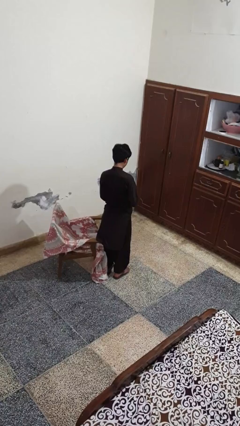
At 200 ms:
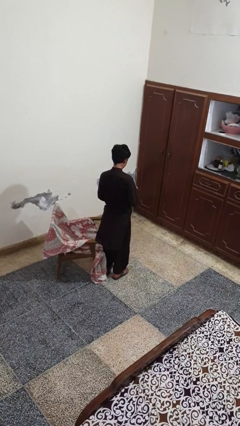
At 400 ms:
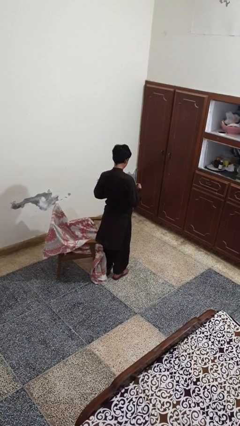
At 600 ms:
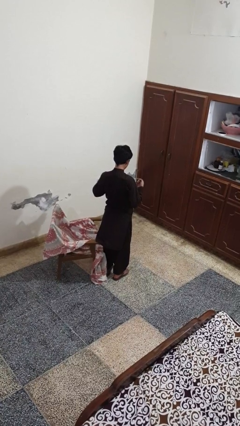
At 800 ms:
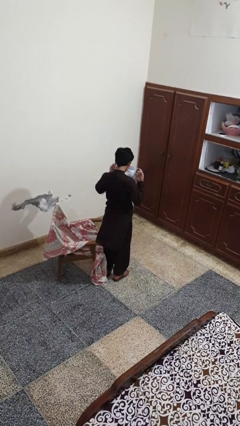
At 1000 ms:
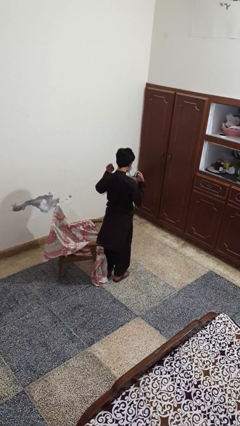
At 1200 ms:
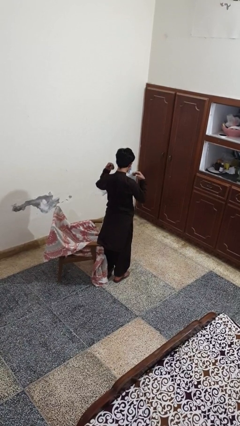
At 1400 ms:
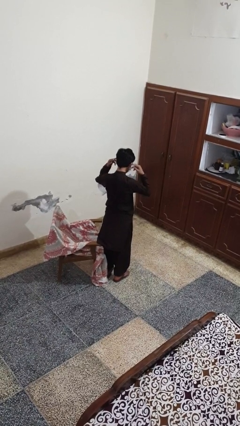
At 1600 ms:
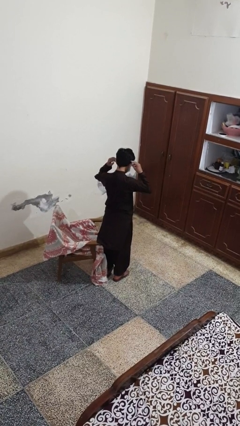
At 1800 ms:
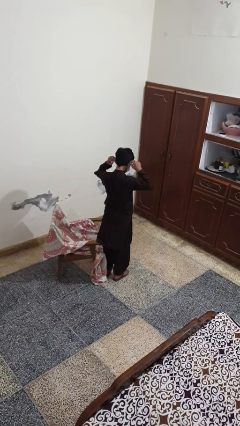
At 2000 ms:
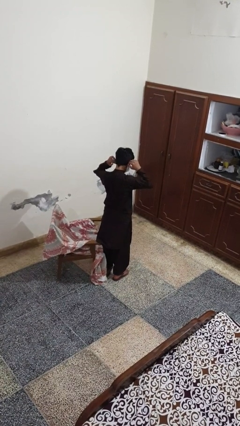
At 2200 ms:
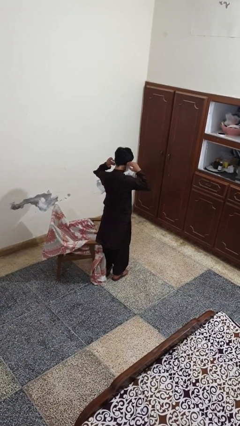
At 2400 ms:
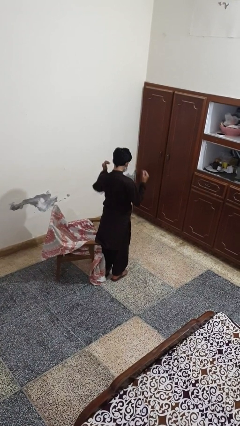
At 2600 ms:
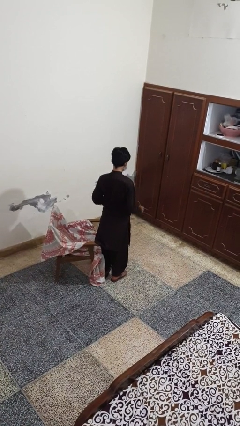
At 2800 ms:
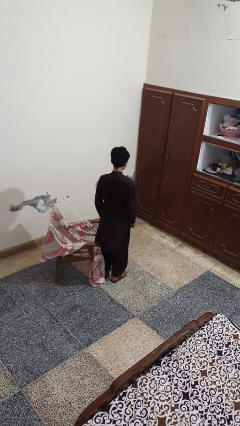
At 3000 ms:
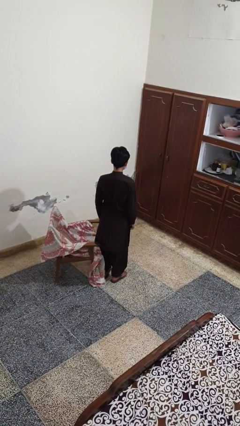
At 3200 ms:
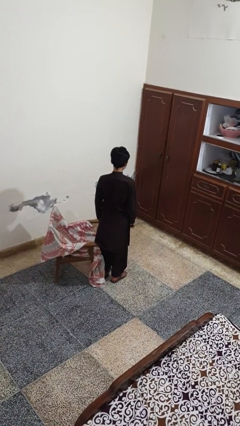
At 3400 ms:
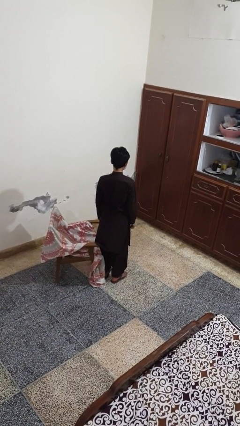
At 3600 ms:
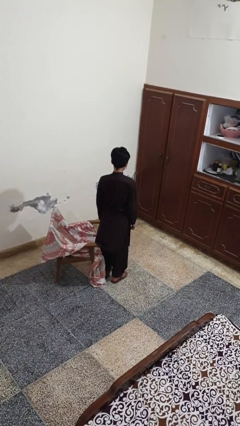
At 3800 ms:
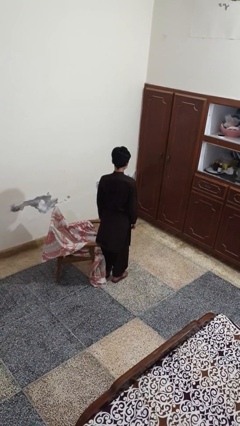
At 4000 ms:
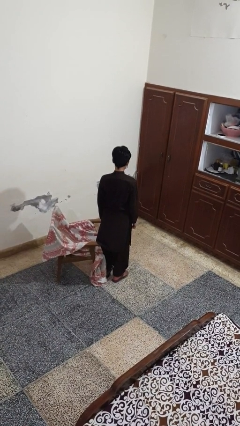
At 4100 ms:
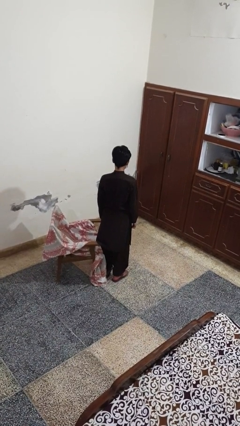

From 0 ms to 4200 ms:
person puts on facemask

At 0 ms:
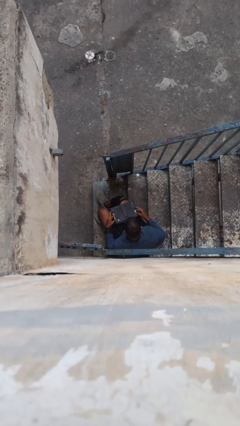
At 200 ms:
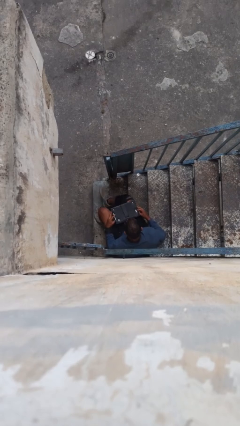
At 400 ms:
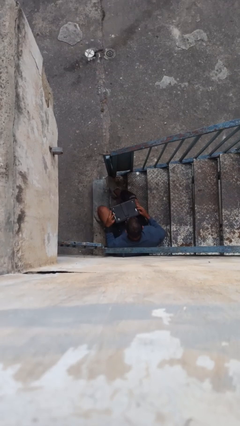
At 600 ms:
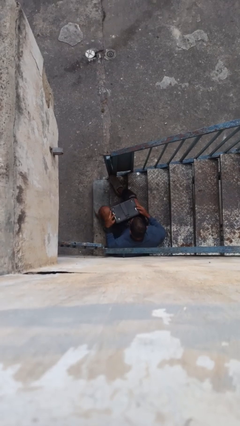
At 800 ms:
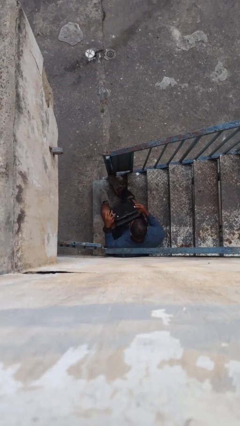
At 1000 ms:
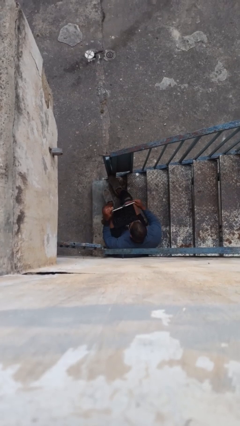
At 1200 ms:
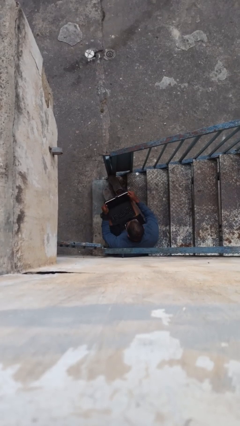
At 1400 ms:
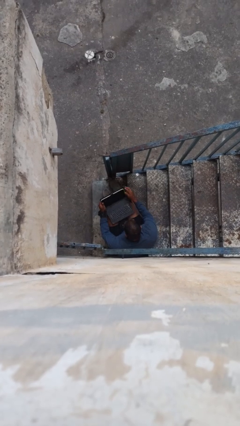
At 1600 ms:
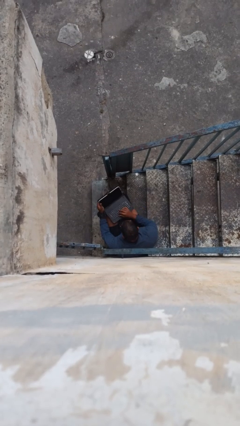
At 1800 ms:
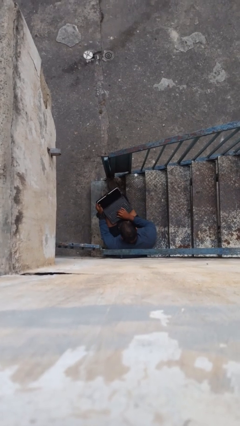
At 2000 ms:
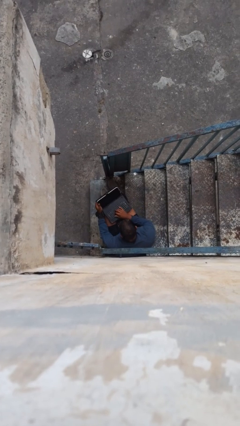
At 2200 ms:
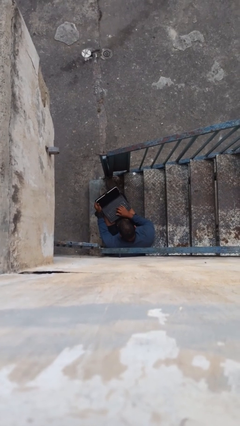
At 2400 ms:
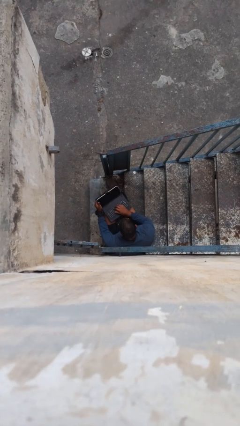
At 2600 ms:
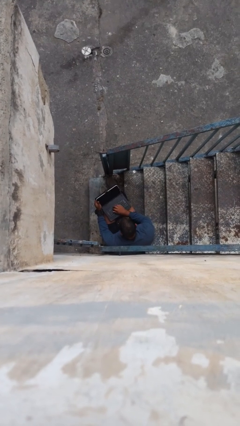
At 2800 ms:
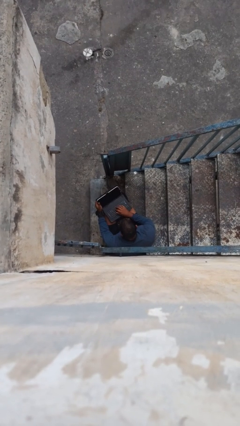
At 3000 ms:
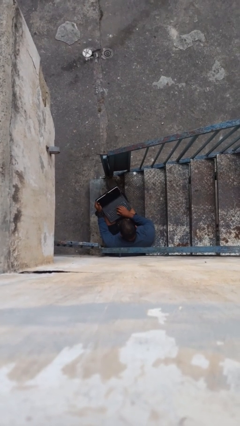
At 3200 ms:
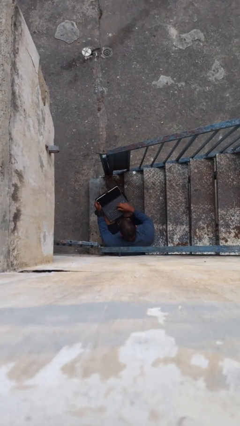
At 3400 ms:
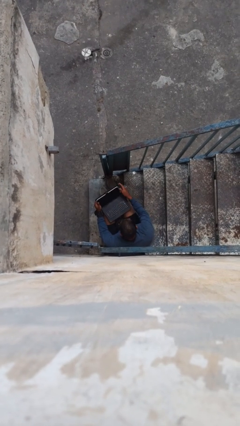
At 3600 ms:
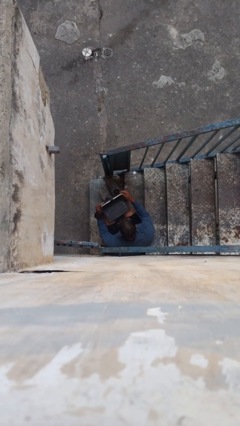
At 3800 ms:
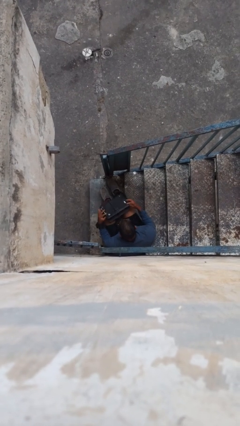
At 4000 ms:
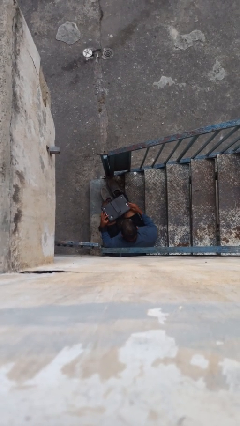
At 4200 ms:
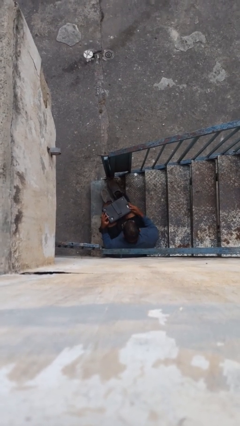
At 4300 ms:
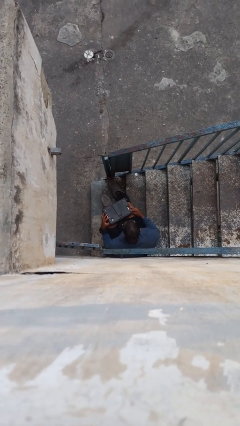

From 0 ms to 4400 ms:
person interacts with laptop

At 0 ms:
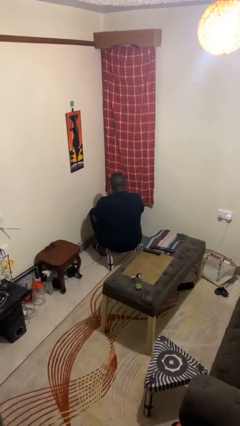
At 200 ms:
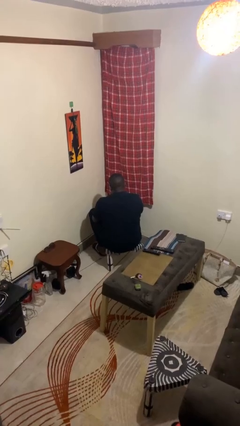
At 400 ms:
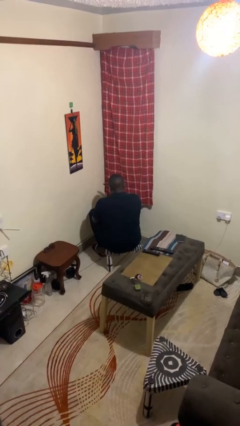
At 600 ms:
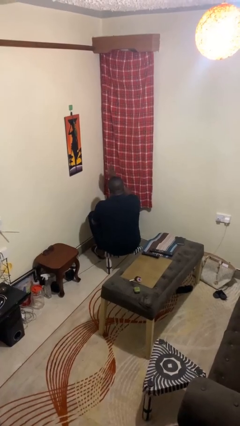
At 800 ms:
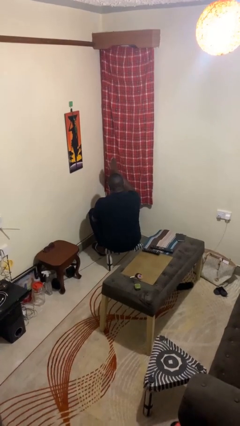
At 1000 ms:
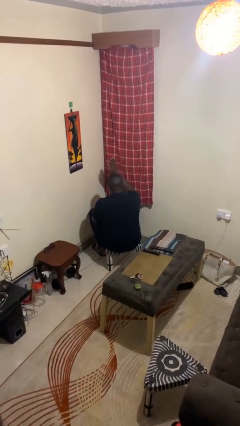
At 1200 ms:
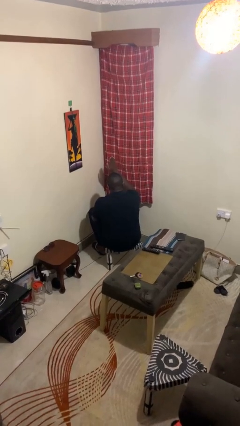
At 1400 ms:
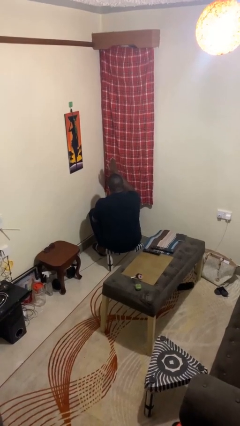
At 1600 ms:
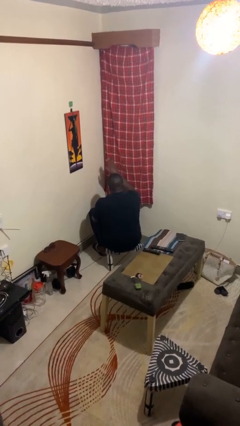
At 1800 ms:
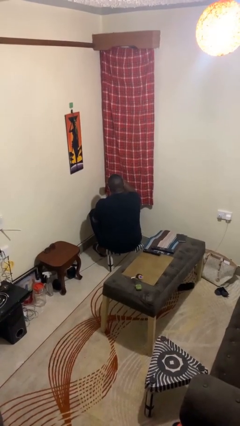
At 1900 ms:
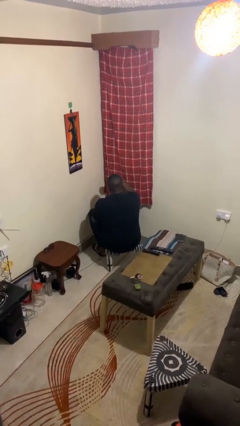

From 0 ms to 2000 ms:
person gestures swipe up

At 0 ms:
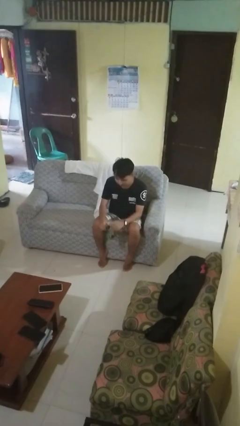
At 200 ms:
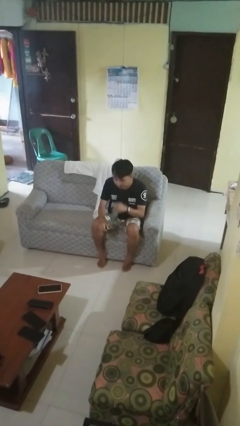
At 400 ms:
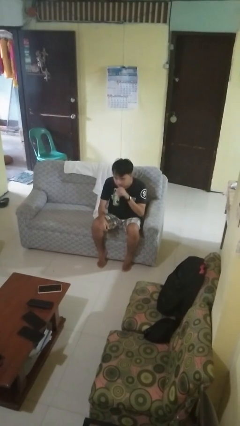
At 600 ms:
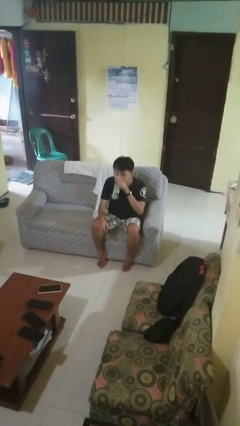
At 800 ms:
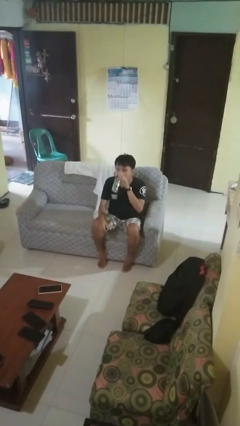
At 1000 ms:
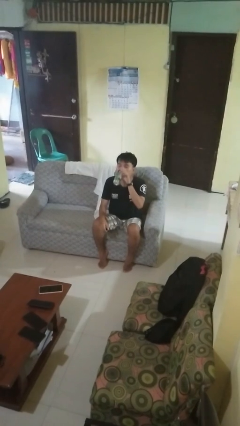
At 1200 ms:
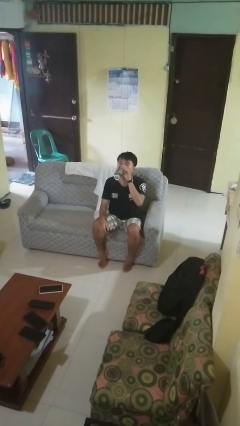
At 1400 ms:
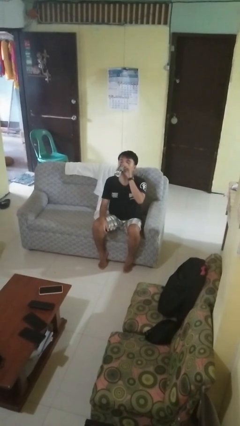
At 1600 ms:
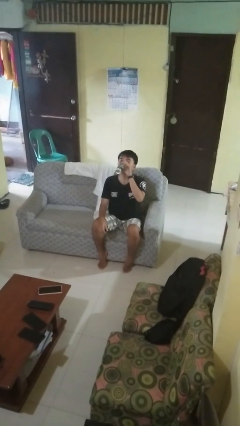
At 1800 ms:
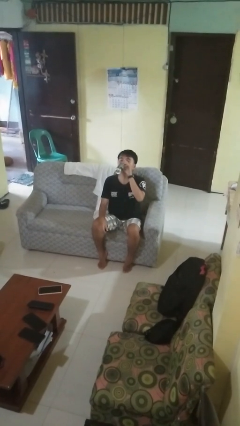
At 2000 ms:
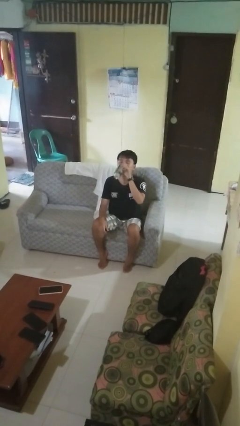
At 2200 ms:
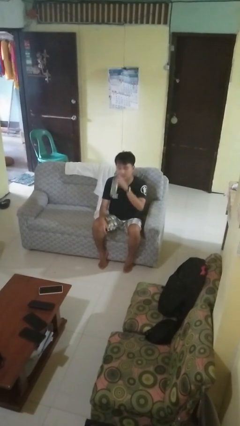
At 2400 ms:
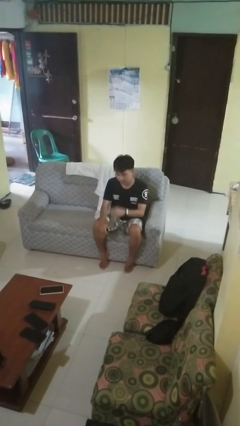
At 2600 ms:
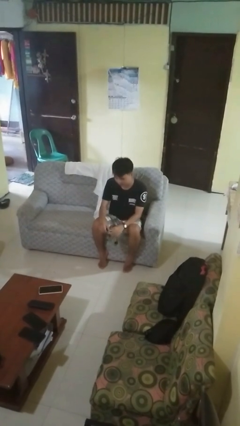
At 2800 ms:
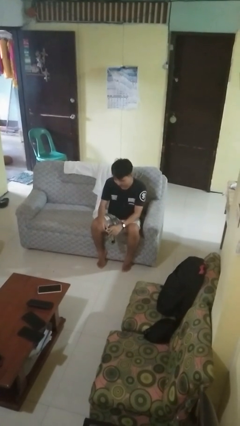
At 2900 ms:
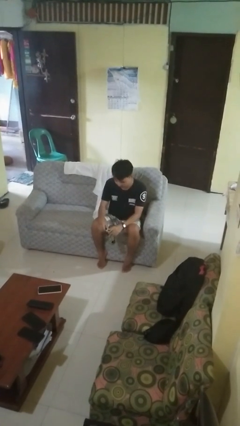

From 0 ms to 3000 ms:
person drinks from beverage can

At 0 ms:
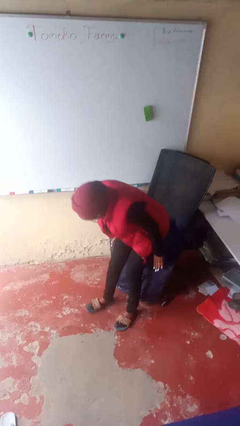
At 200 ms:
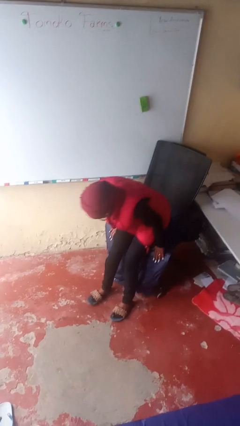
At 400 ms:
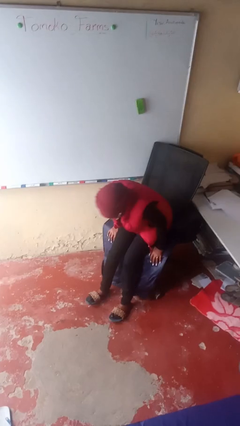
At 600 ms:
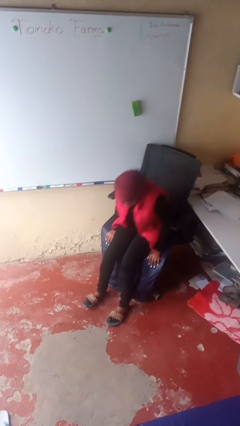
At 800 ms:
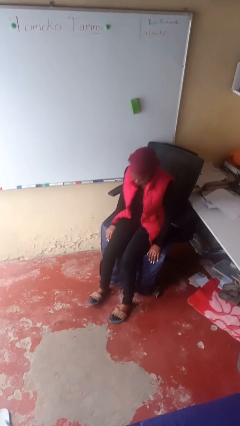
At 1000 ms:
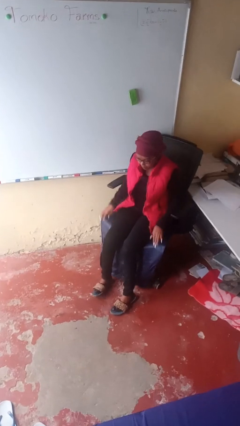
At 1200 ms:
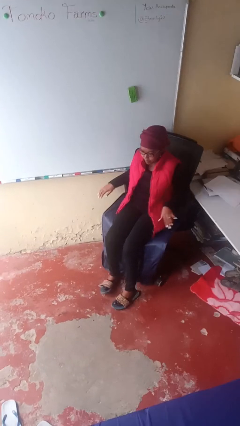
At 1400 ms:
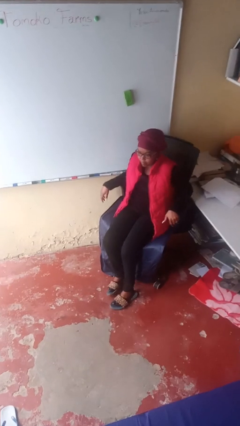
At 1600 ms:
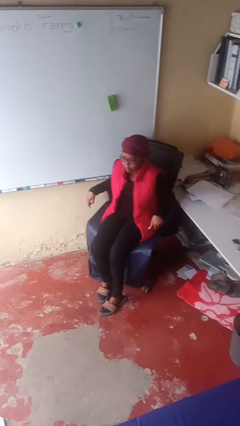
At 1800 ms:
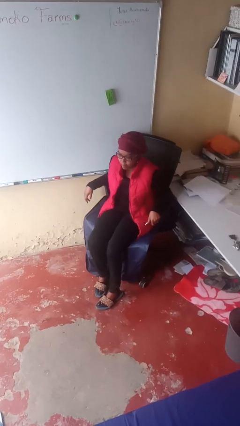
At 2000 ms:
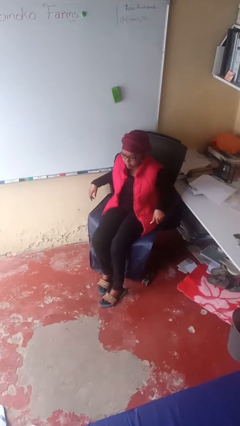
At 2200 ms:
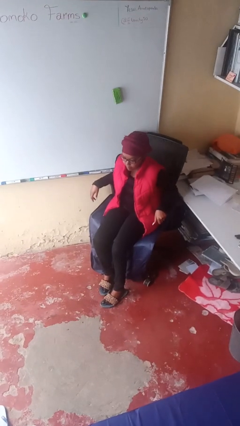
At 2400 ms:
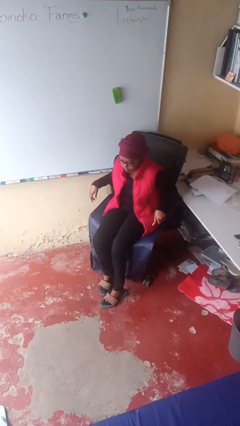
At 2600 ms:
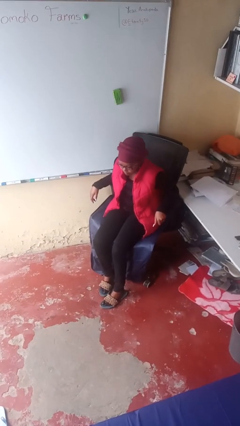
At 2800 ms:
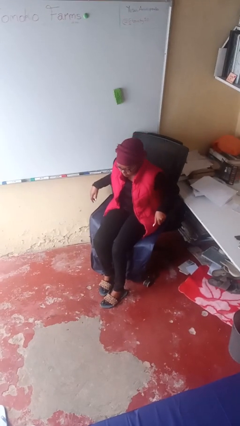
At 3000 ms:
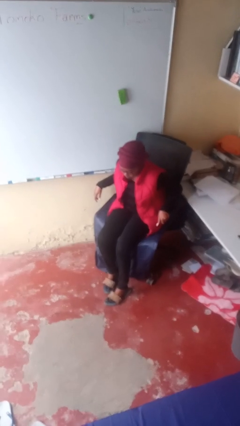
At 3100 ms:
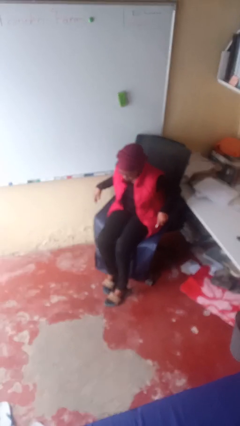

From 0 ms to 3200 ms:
person sits down

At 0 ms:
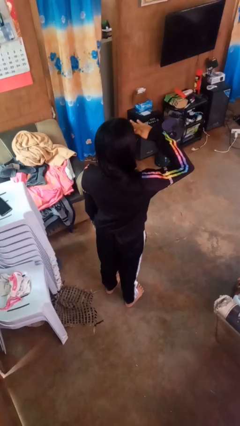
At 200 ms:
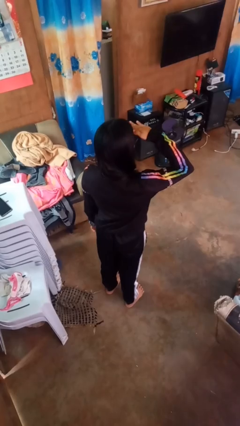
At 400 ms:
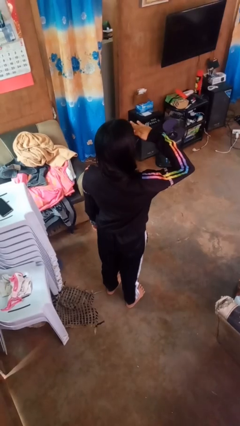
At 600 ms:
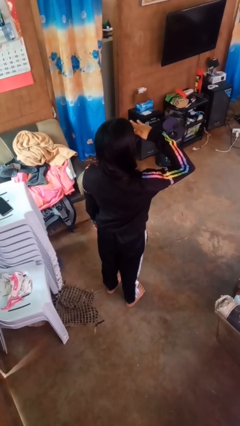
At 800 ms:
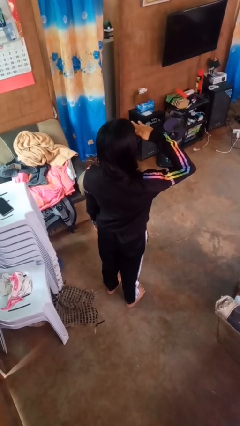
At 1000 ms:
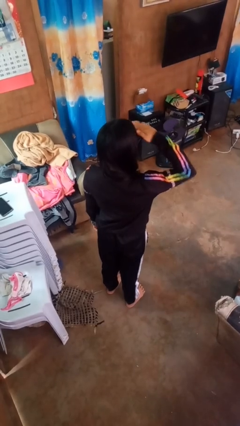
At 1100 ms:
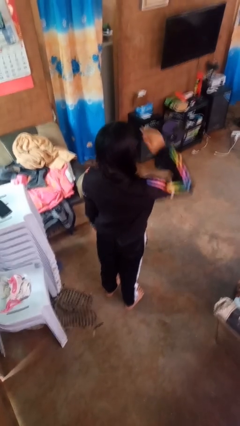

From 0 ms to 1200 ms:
person salutes
